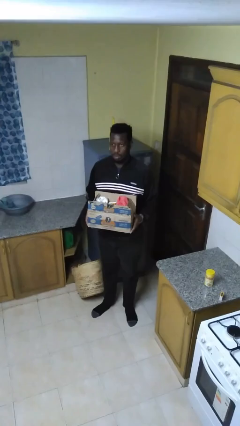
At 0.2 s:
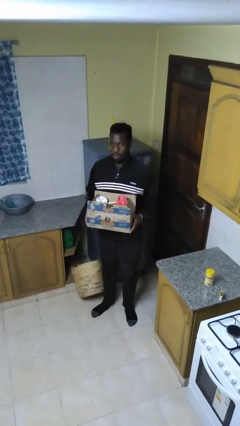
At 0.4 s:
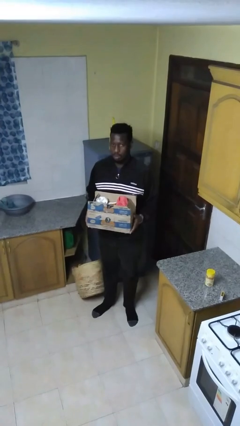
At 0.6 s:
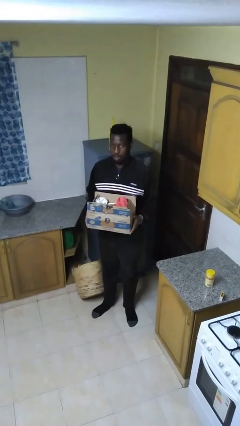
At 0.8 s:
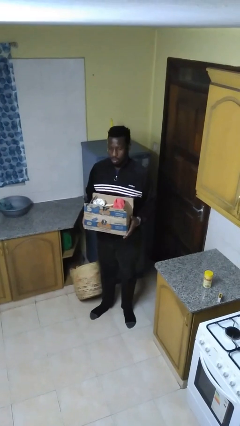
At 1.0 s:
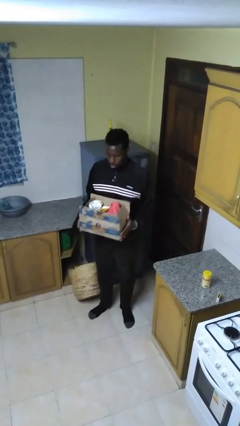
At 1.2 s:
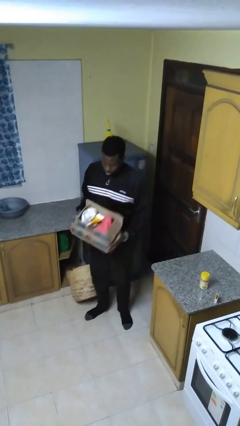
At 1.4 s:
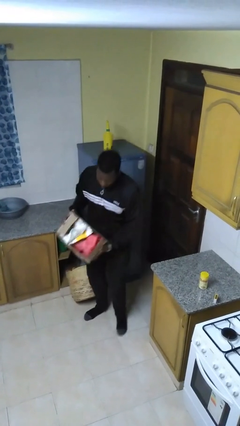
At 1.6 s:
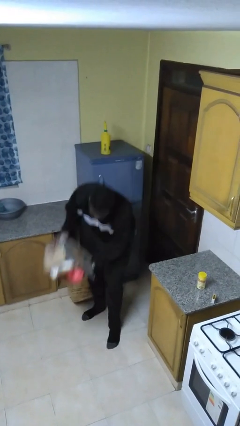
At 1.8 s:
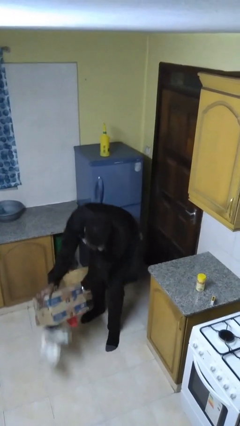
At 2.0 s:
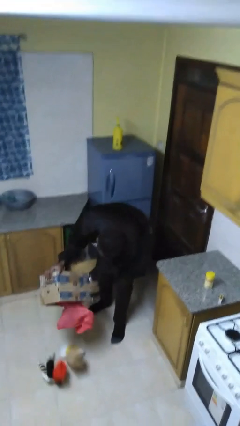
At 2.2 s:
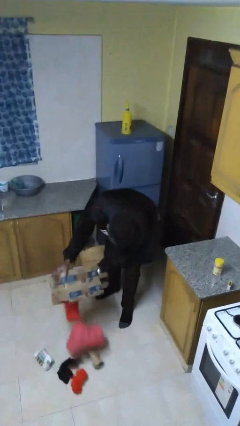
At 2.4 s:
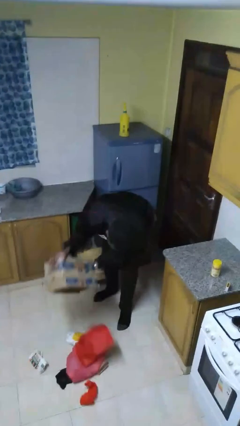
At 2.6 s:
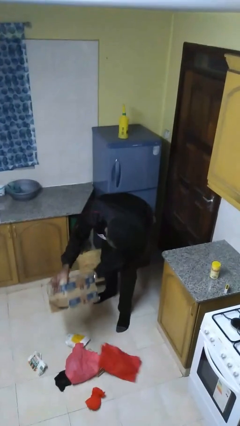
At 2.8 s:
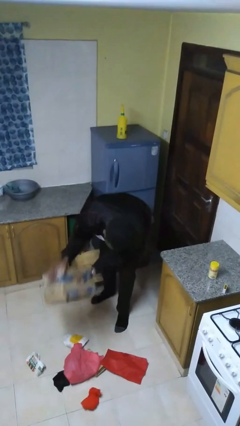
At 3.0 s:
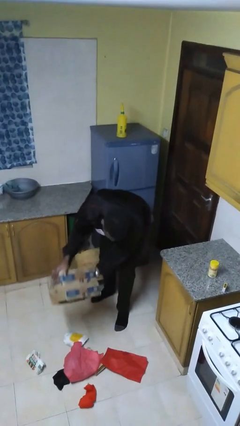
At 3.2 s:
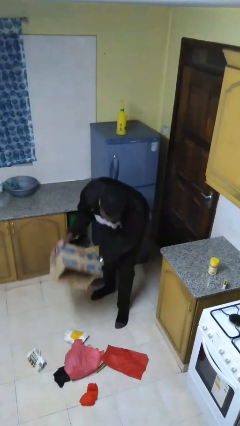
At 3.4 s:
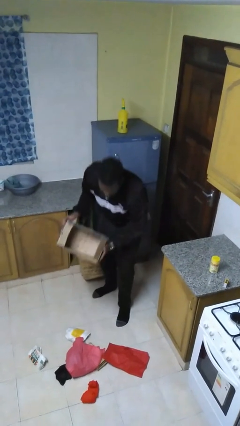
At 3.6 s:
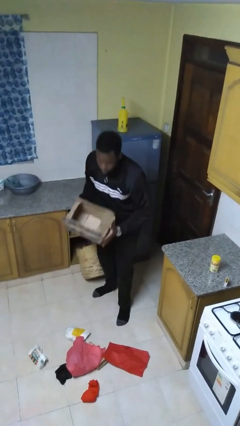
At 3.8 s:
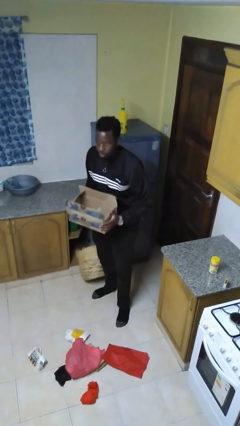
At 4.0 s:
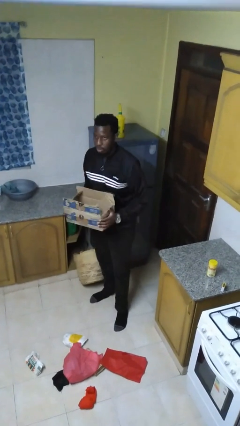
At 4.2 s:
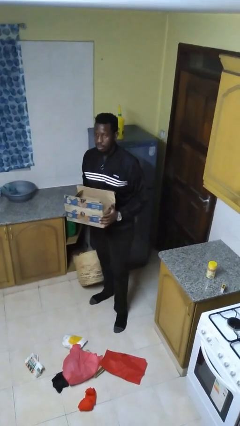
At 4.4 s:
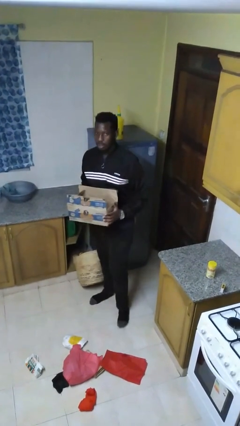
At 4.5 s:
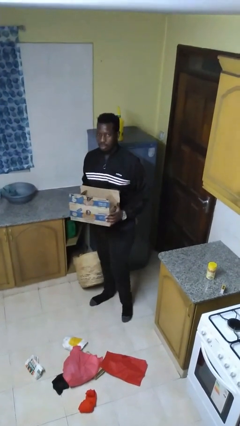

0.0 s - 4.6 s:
person unloads box onto floor

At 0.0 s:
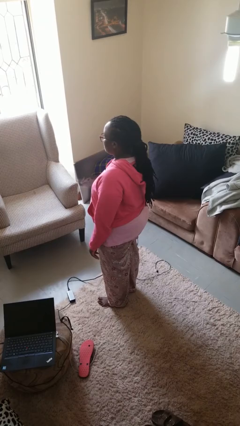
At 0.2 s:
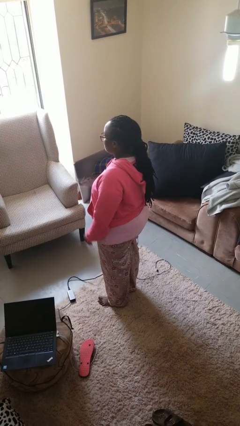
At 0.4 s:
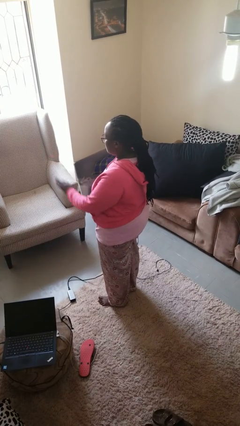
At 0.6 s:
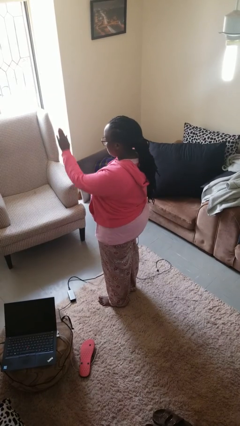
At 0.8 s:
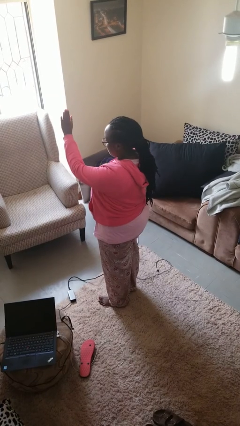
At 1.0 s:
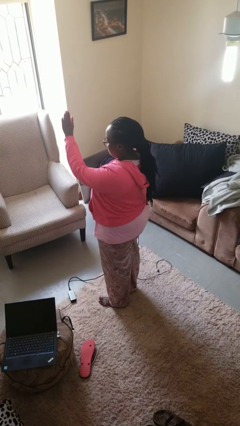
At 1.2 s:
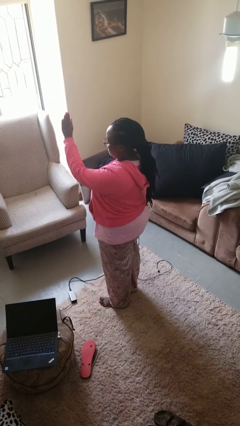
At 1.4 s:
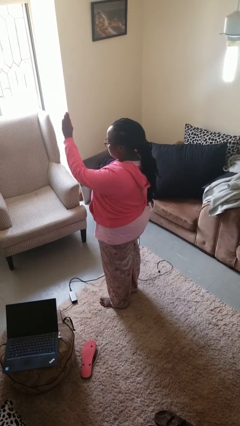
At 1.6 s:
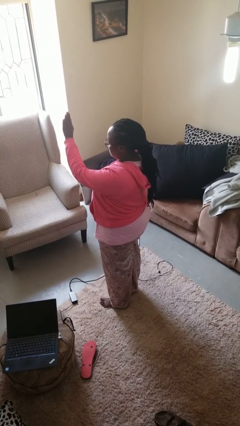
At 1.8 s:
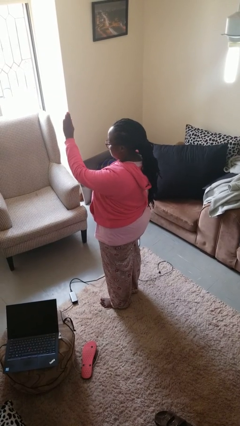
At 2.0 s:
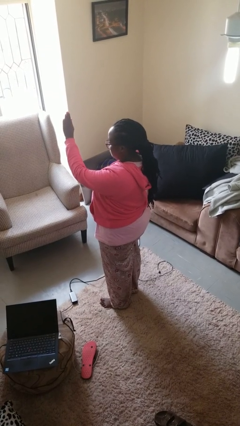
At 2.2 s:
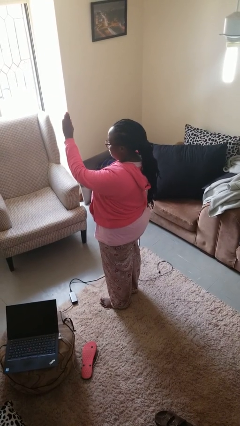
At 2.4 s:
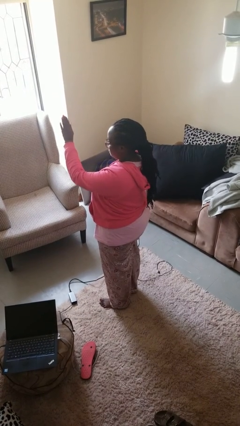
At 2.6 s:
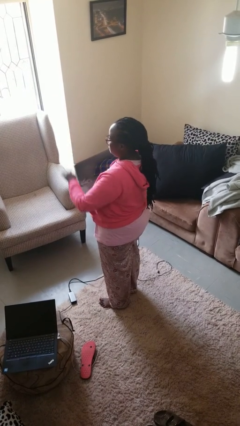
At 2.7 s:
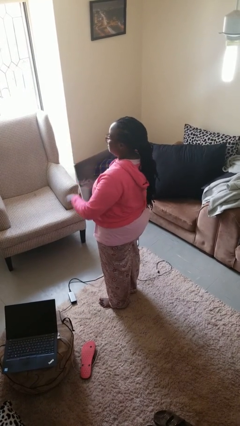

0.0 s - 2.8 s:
person gestures stop

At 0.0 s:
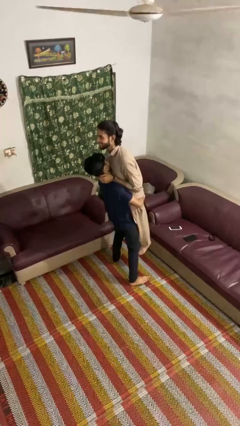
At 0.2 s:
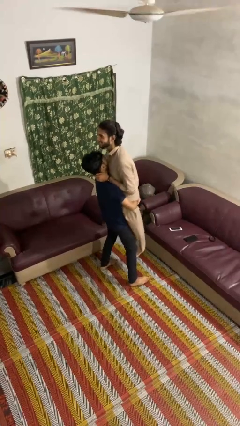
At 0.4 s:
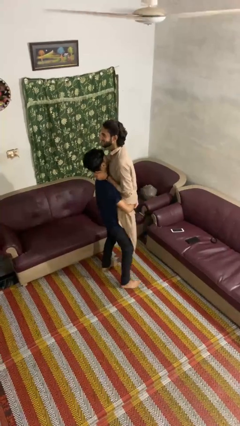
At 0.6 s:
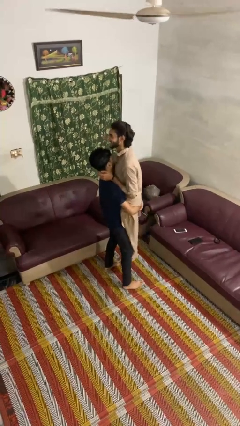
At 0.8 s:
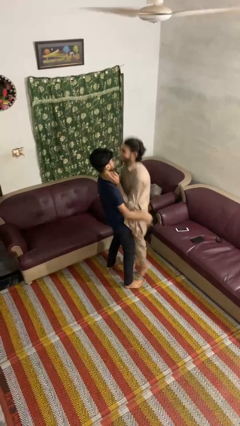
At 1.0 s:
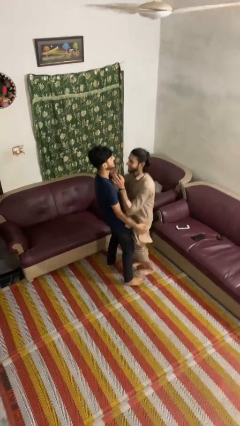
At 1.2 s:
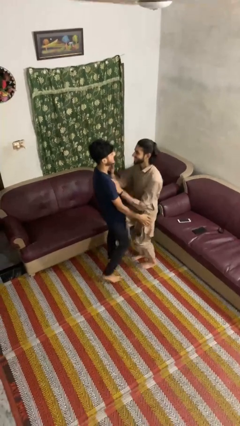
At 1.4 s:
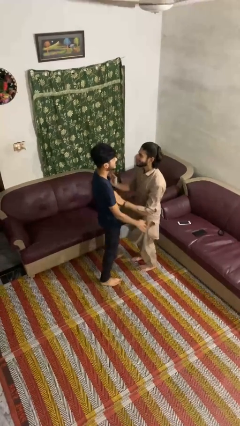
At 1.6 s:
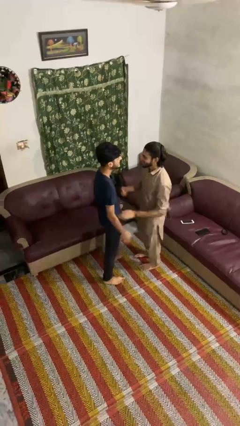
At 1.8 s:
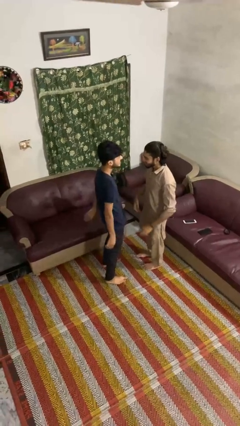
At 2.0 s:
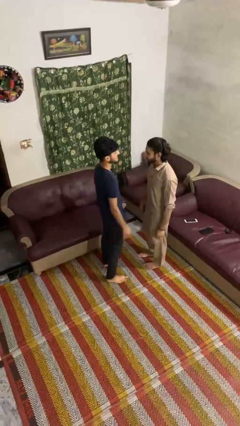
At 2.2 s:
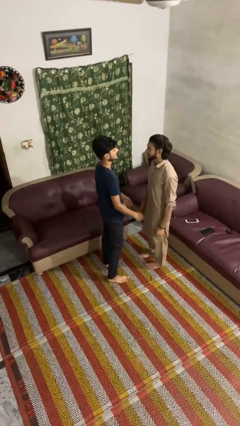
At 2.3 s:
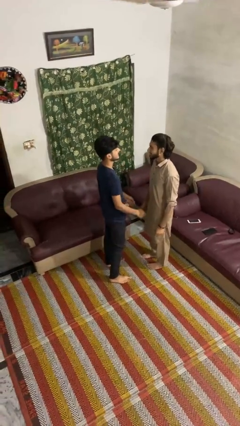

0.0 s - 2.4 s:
person puts down person

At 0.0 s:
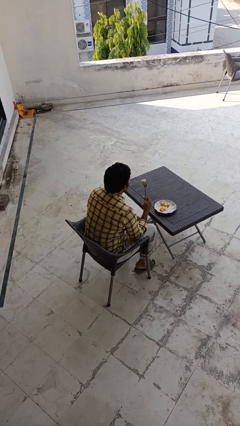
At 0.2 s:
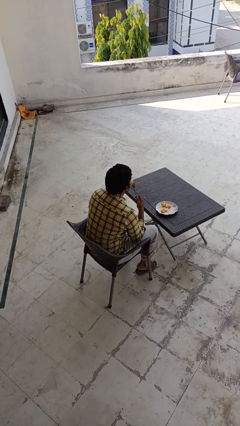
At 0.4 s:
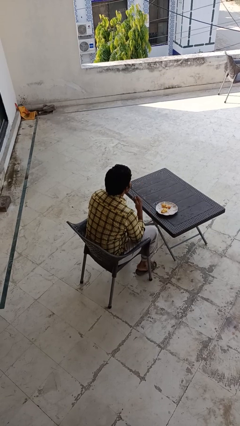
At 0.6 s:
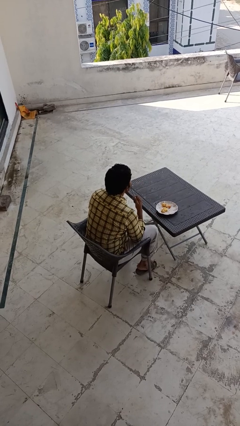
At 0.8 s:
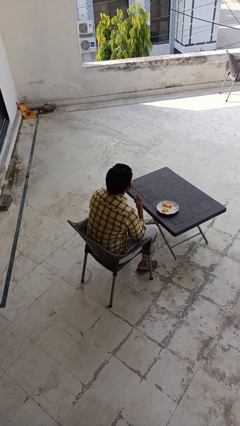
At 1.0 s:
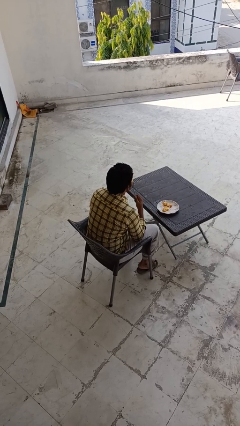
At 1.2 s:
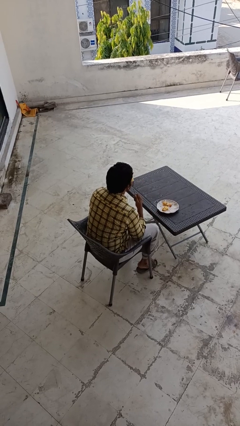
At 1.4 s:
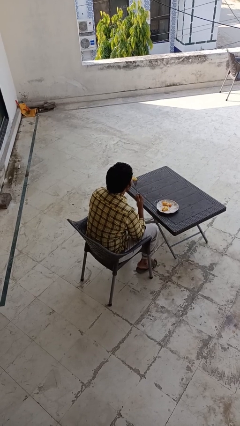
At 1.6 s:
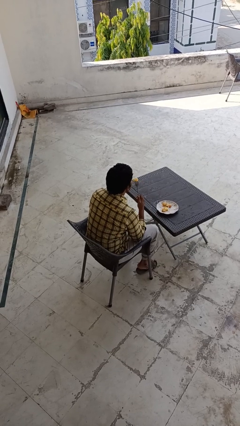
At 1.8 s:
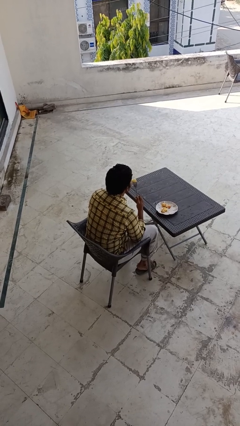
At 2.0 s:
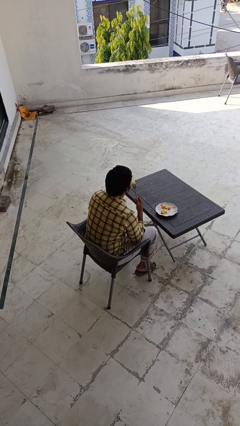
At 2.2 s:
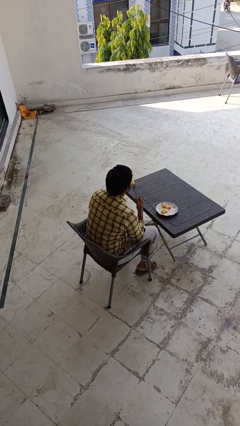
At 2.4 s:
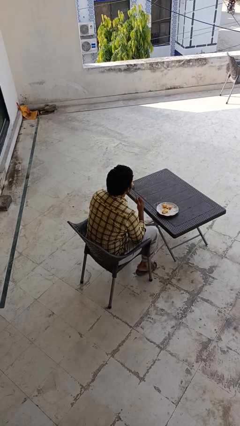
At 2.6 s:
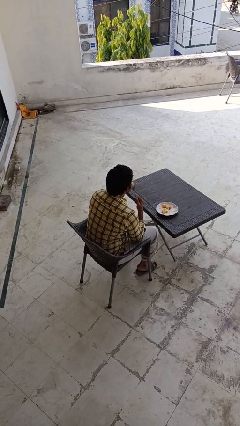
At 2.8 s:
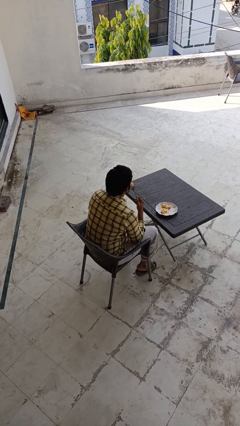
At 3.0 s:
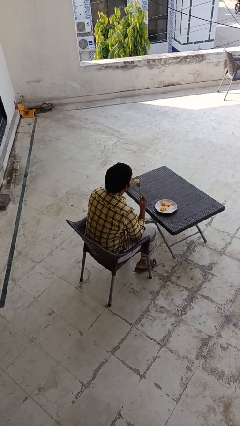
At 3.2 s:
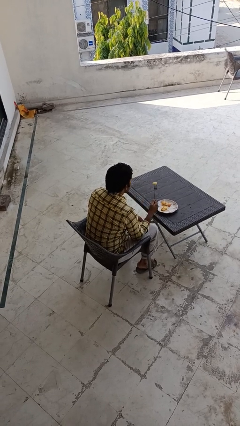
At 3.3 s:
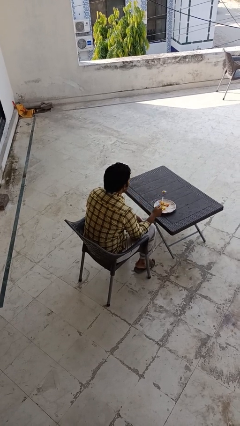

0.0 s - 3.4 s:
person eats with utensil

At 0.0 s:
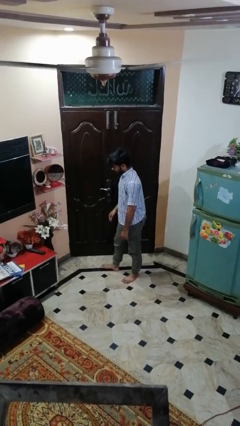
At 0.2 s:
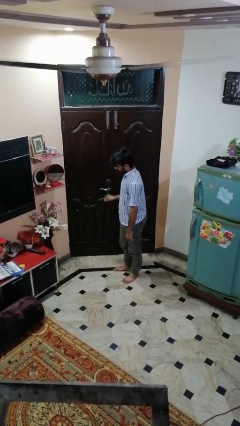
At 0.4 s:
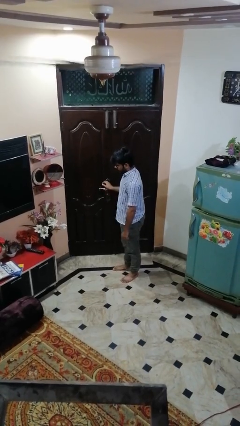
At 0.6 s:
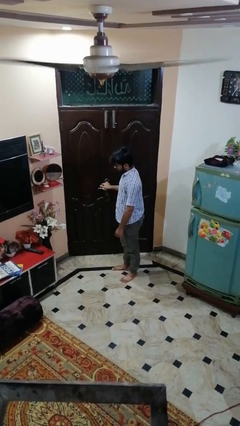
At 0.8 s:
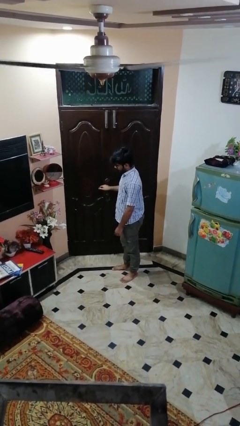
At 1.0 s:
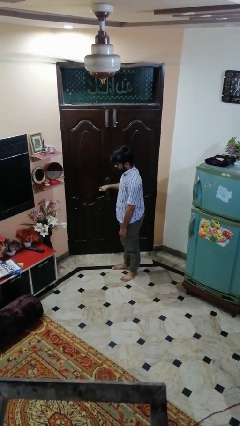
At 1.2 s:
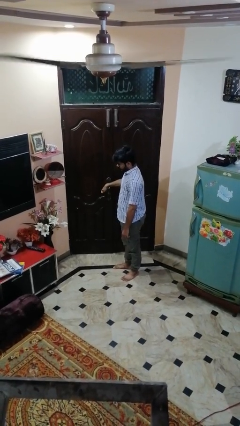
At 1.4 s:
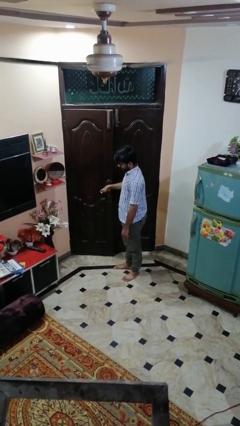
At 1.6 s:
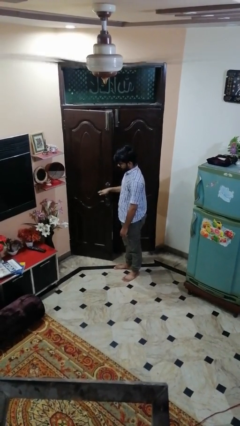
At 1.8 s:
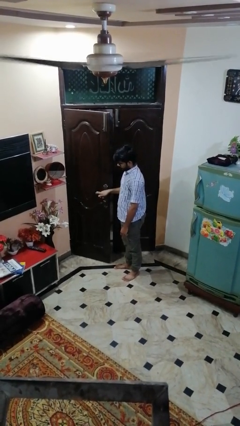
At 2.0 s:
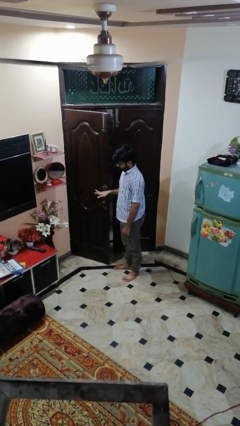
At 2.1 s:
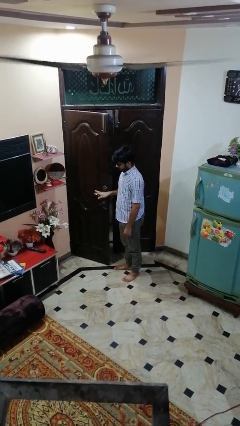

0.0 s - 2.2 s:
person opens facility door

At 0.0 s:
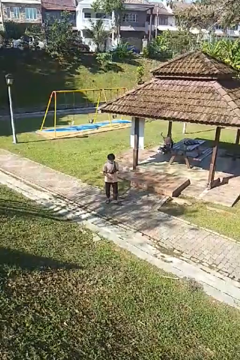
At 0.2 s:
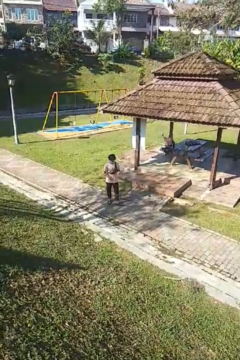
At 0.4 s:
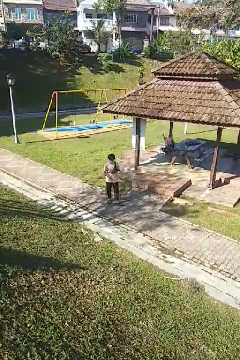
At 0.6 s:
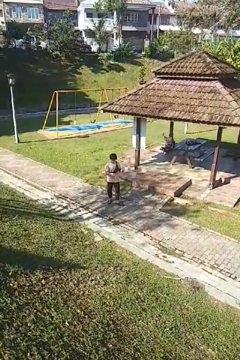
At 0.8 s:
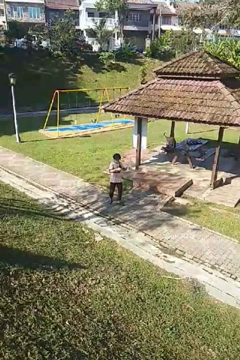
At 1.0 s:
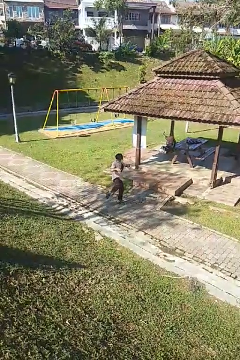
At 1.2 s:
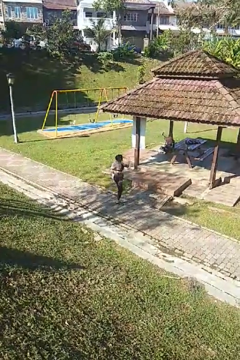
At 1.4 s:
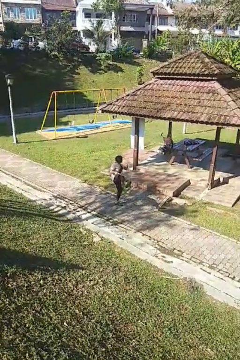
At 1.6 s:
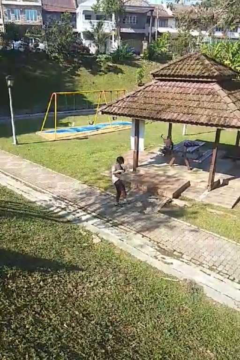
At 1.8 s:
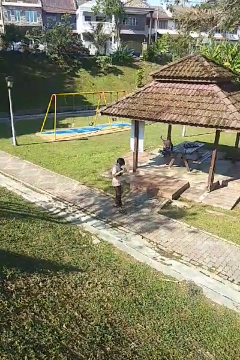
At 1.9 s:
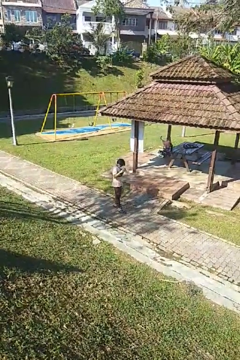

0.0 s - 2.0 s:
person karate kicks

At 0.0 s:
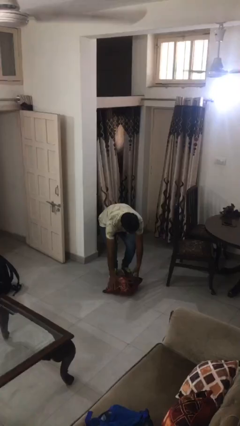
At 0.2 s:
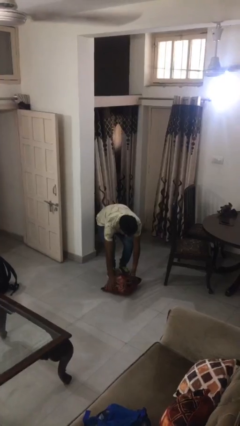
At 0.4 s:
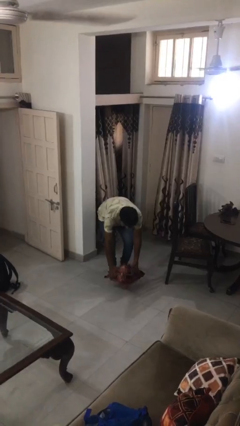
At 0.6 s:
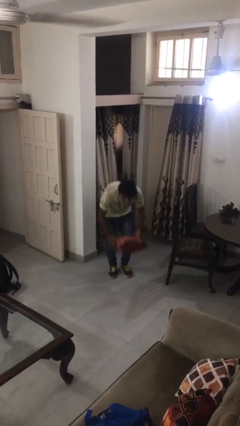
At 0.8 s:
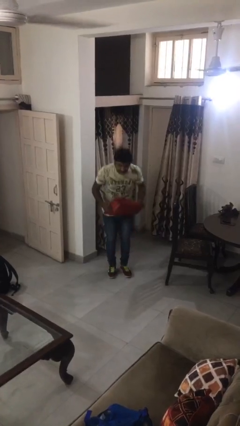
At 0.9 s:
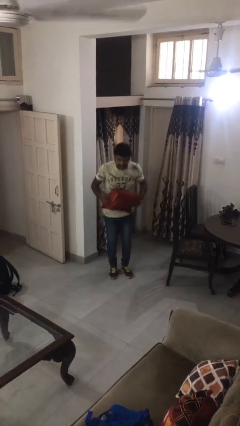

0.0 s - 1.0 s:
person picks up object from floor
